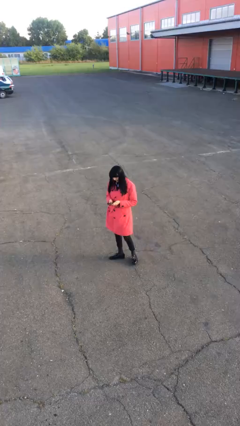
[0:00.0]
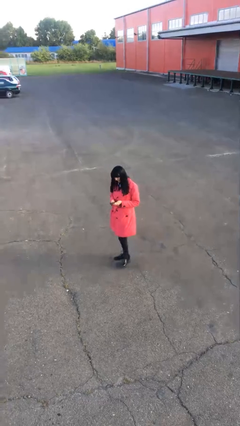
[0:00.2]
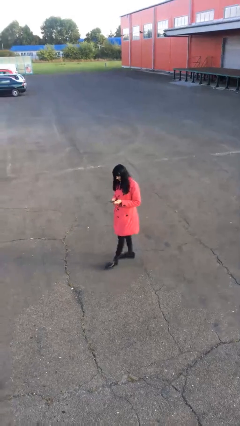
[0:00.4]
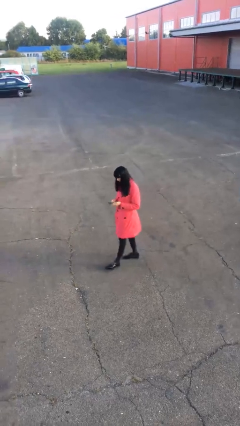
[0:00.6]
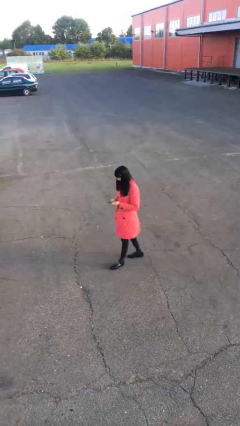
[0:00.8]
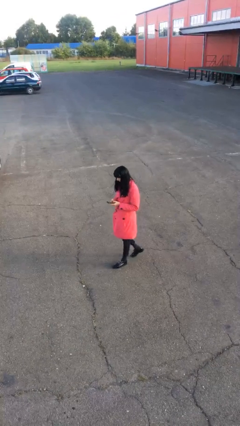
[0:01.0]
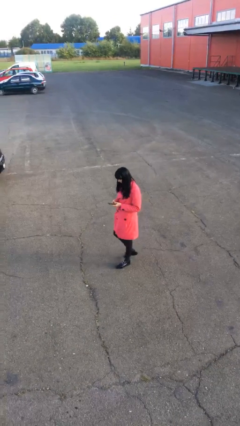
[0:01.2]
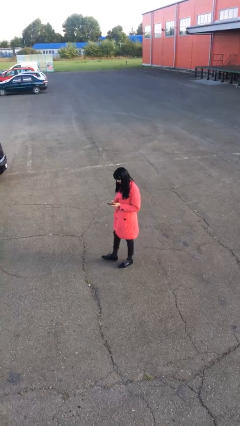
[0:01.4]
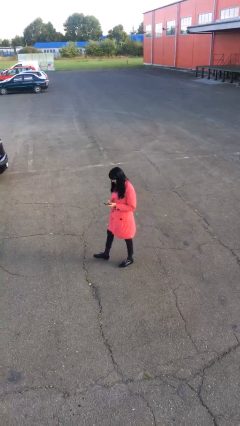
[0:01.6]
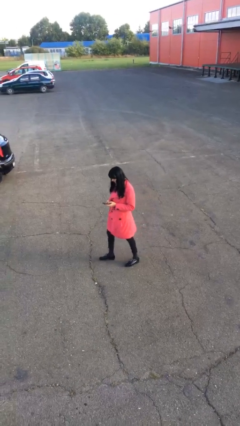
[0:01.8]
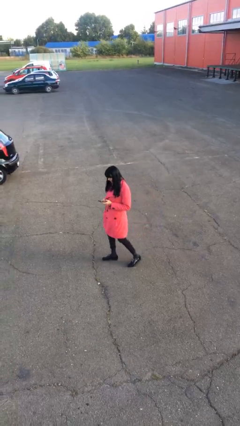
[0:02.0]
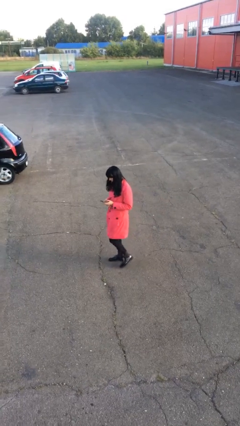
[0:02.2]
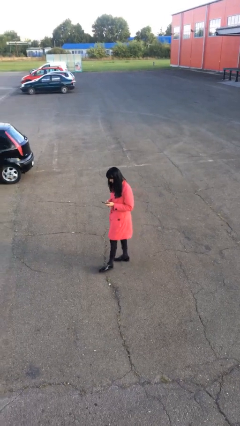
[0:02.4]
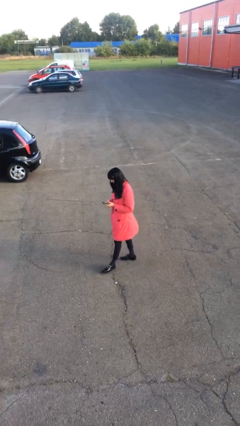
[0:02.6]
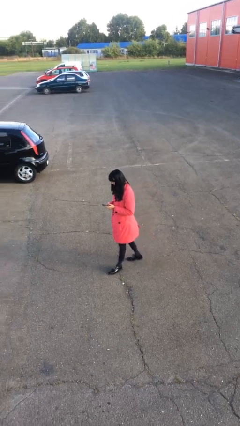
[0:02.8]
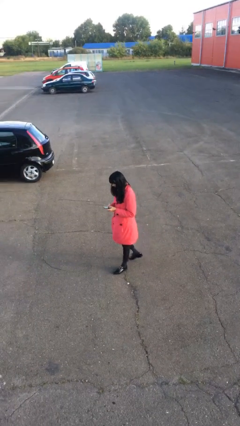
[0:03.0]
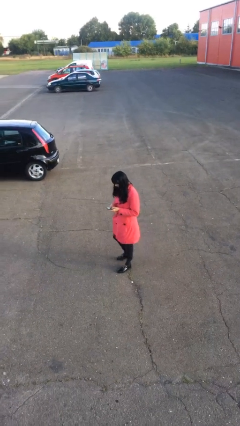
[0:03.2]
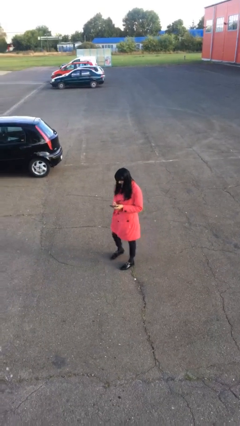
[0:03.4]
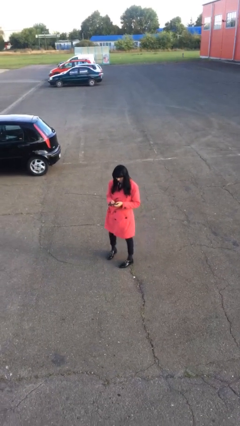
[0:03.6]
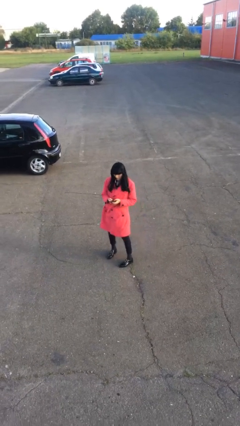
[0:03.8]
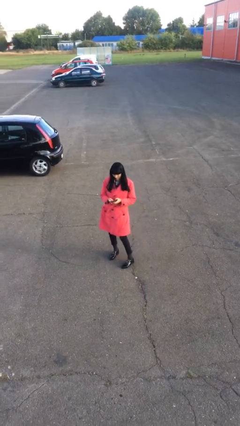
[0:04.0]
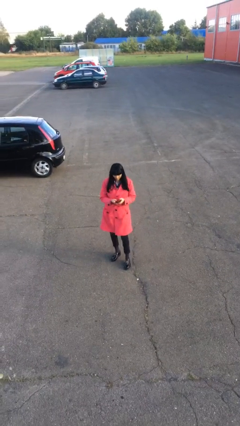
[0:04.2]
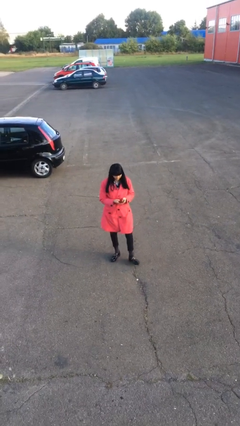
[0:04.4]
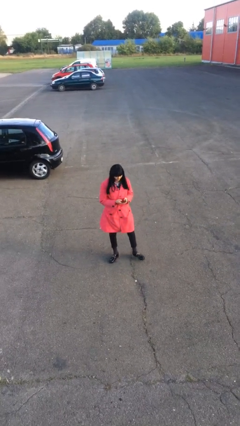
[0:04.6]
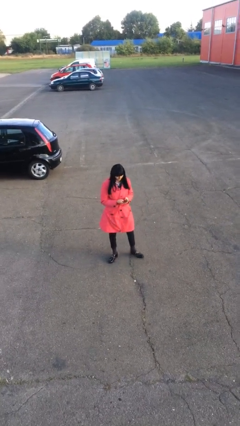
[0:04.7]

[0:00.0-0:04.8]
person texts on phone

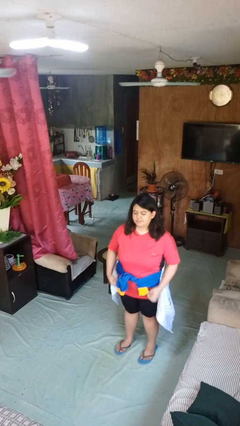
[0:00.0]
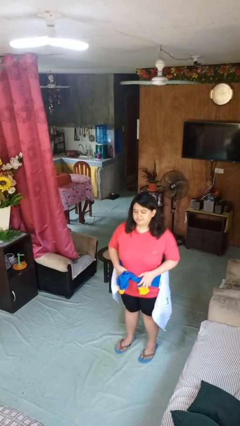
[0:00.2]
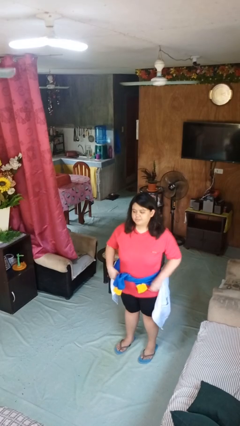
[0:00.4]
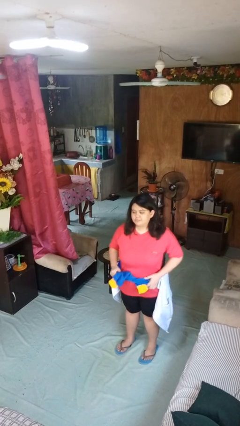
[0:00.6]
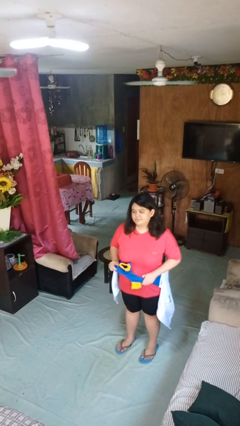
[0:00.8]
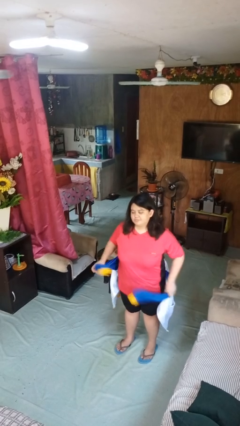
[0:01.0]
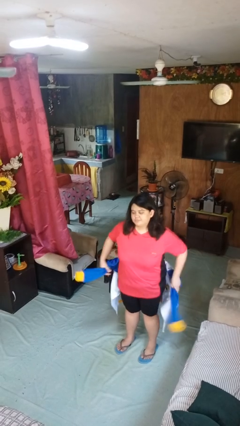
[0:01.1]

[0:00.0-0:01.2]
person unties jacket around waist

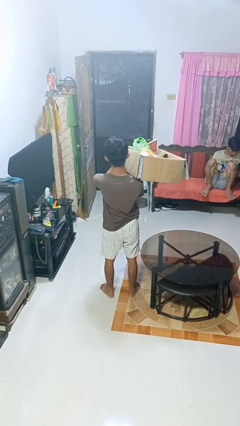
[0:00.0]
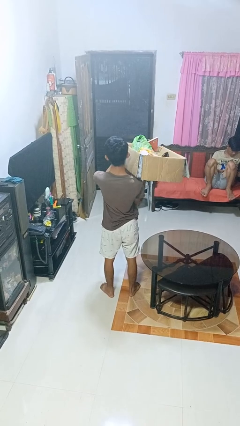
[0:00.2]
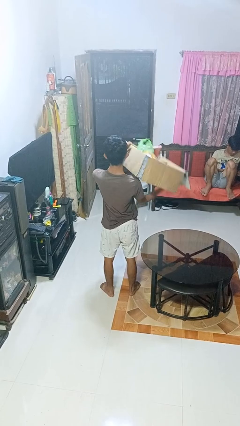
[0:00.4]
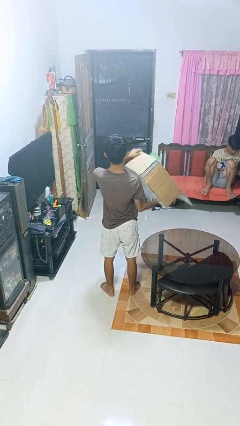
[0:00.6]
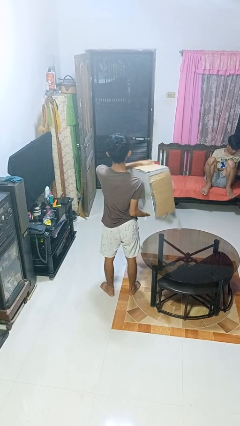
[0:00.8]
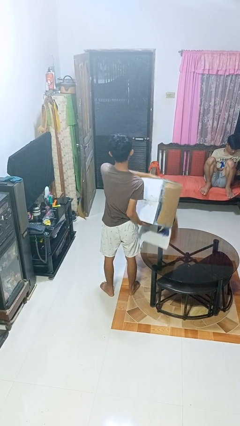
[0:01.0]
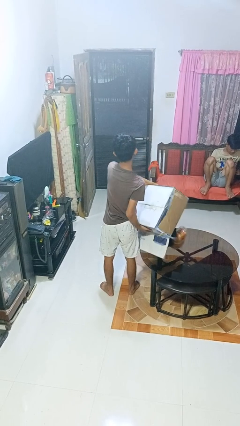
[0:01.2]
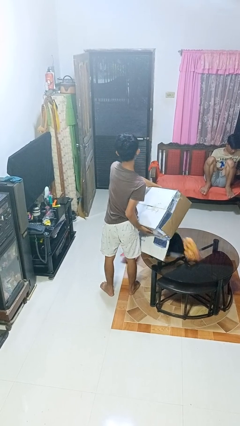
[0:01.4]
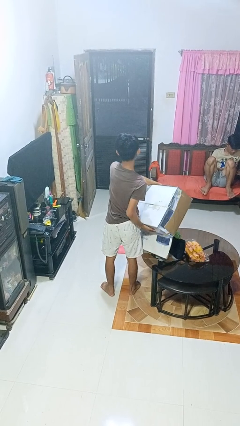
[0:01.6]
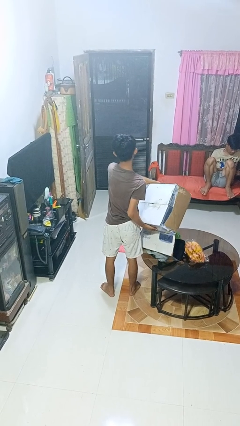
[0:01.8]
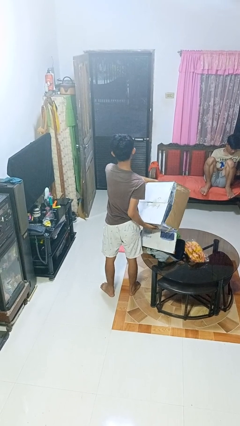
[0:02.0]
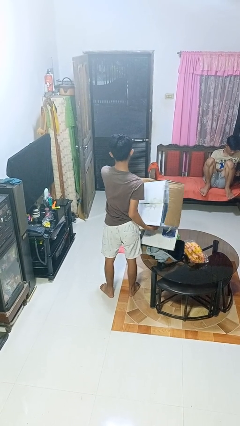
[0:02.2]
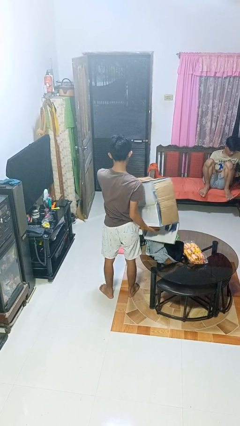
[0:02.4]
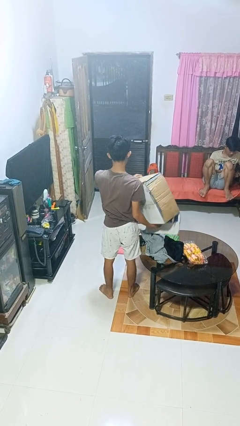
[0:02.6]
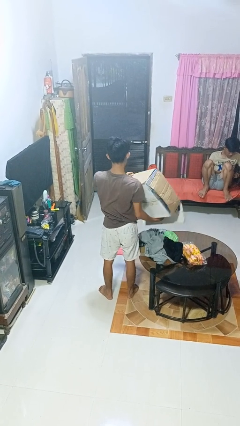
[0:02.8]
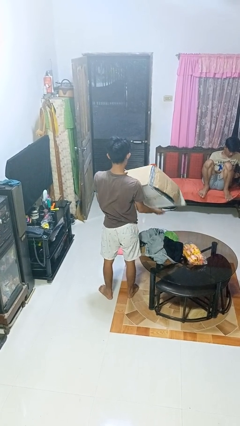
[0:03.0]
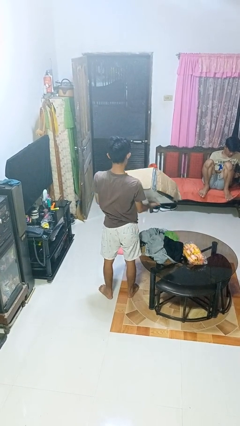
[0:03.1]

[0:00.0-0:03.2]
person unloads box onto table

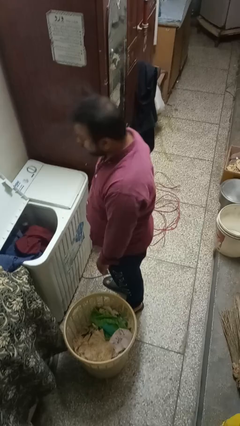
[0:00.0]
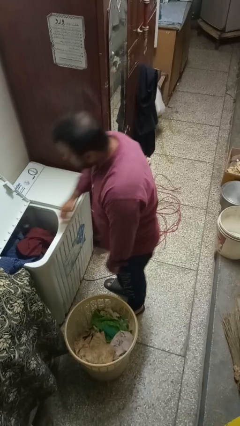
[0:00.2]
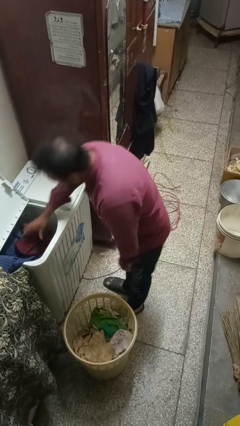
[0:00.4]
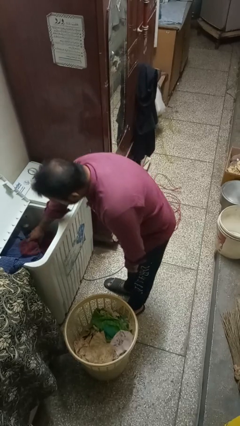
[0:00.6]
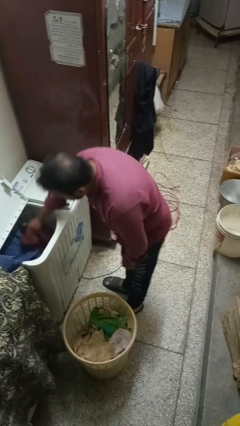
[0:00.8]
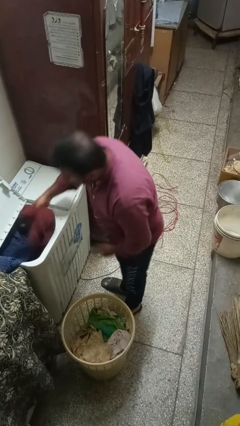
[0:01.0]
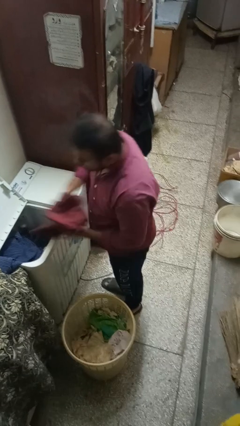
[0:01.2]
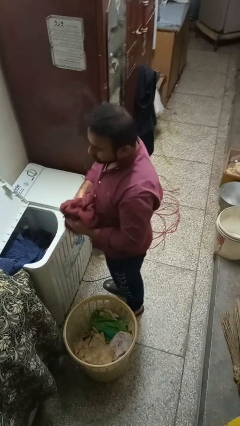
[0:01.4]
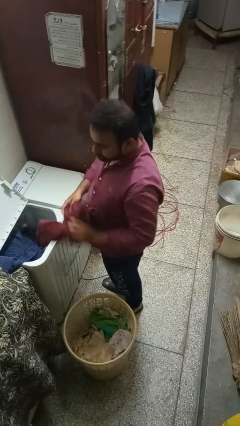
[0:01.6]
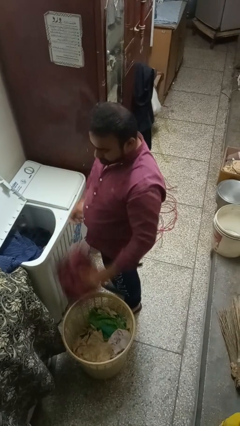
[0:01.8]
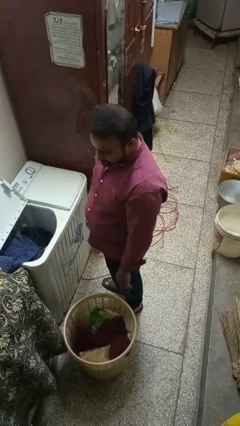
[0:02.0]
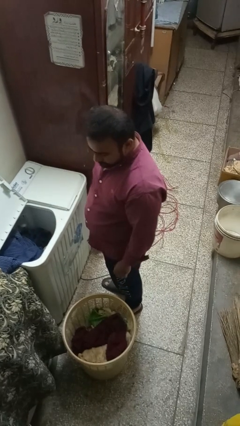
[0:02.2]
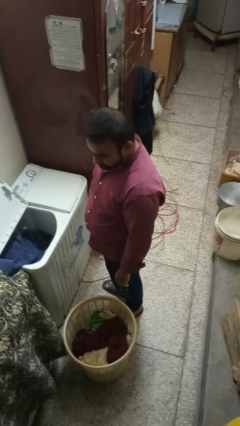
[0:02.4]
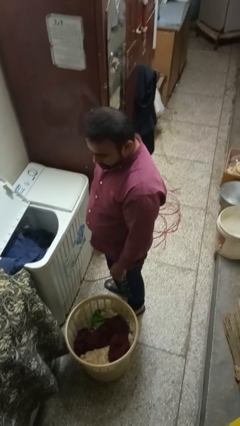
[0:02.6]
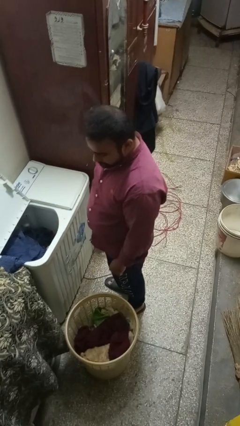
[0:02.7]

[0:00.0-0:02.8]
person unloads clotheswasher

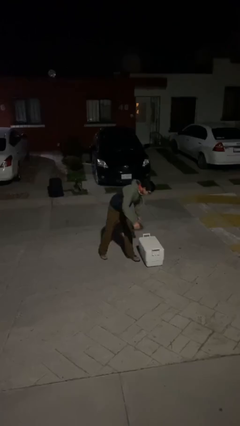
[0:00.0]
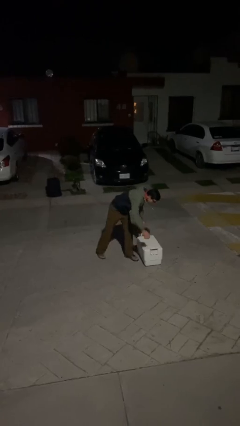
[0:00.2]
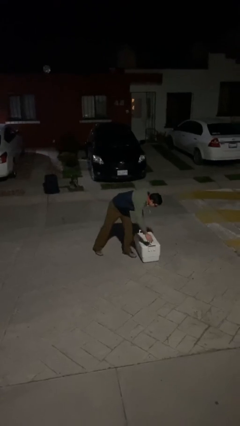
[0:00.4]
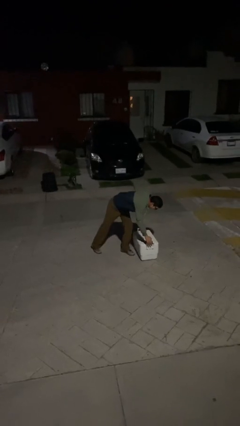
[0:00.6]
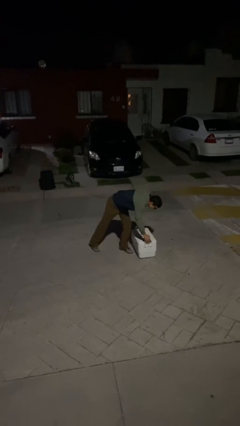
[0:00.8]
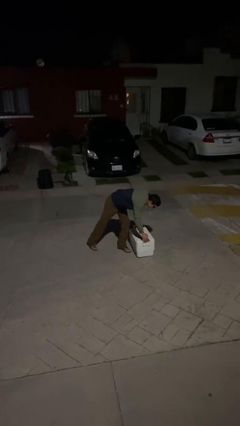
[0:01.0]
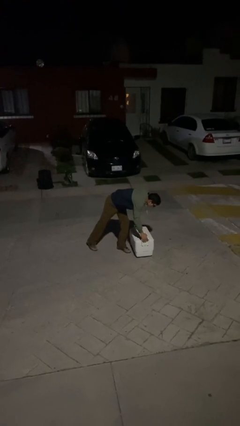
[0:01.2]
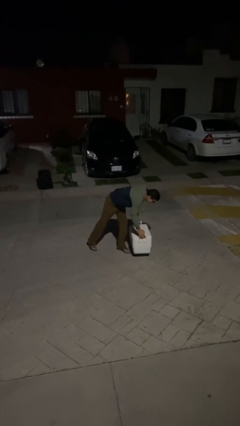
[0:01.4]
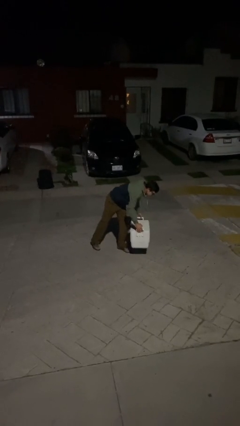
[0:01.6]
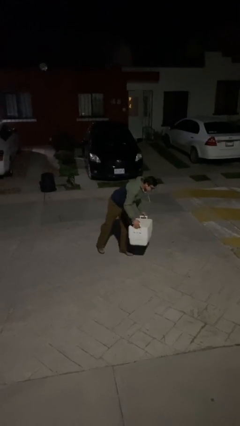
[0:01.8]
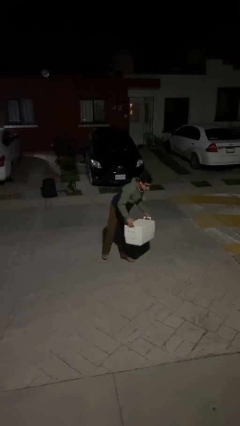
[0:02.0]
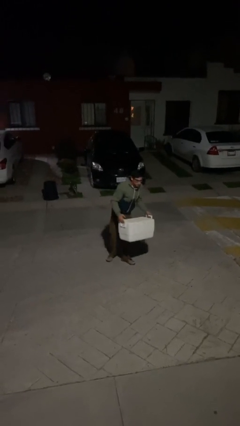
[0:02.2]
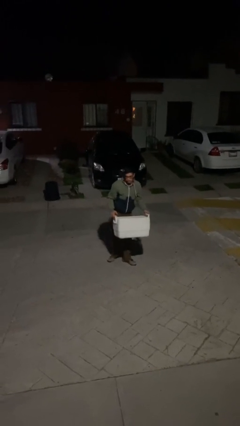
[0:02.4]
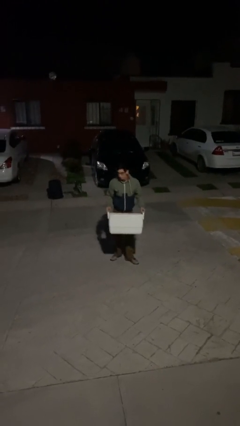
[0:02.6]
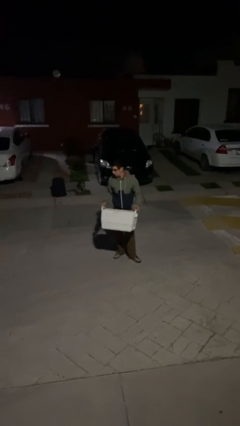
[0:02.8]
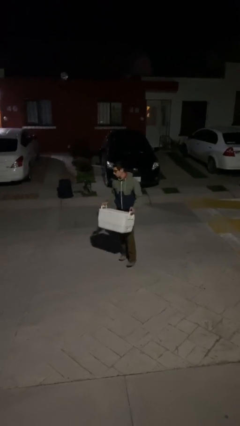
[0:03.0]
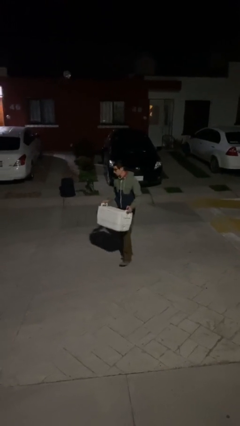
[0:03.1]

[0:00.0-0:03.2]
person picks up object from floor

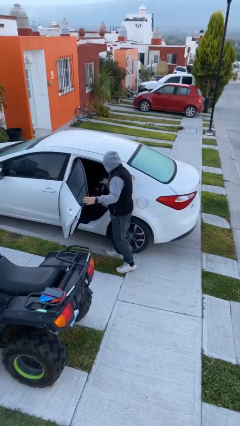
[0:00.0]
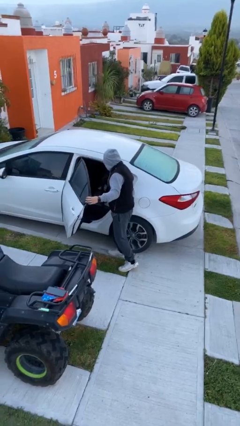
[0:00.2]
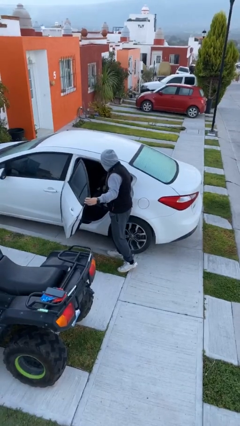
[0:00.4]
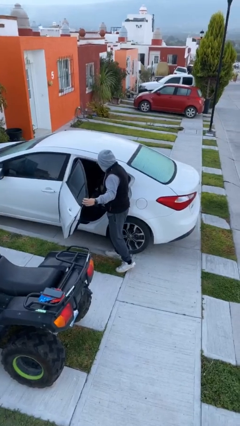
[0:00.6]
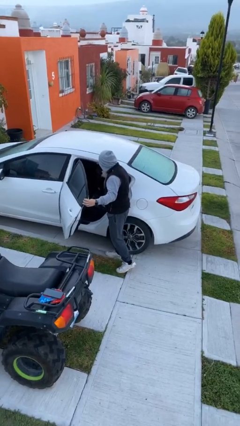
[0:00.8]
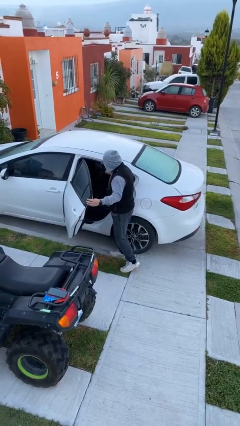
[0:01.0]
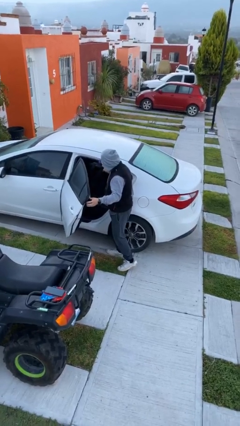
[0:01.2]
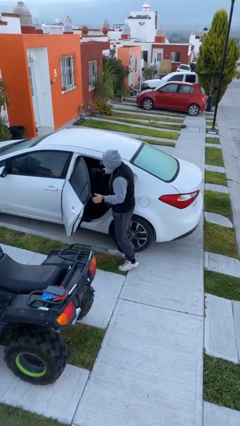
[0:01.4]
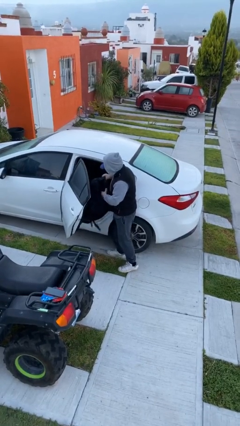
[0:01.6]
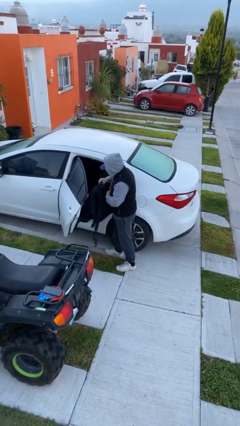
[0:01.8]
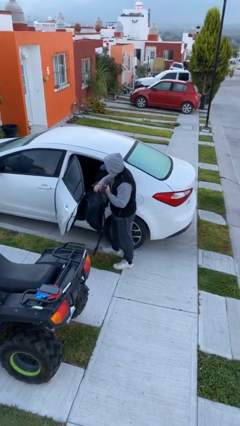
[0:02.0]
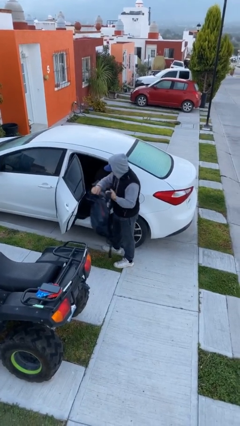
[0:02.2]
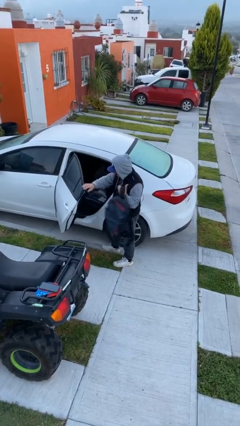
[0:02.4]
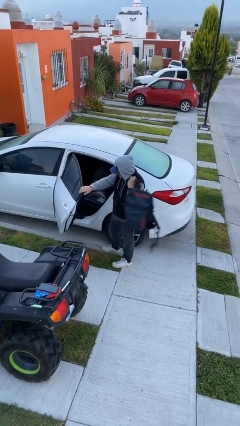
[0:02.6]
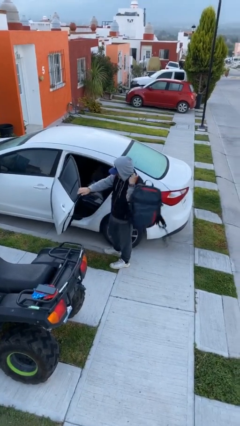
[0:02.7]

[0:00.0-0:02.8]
person unloads car
